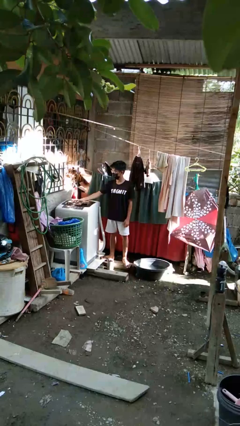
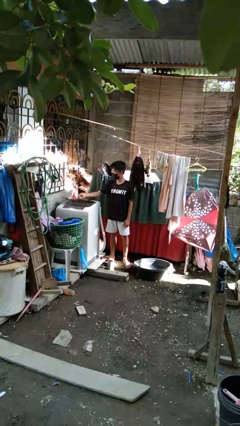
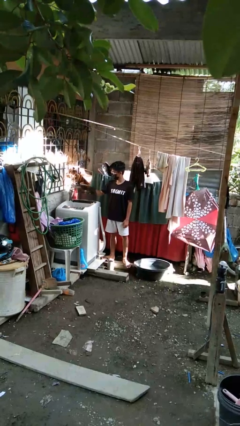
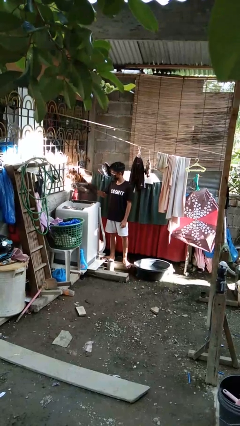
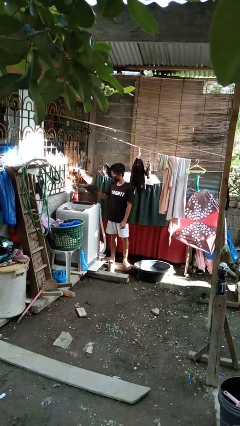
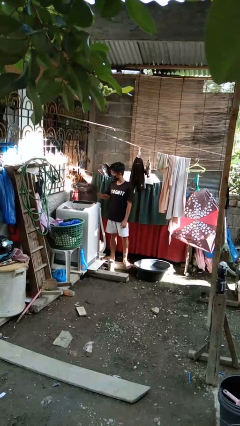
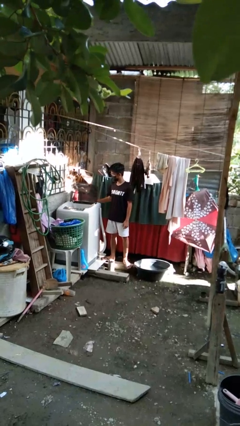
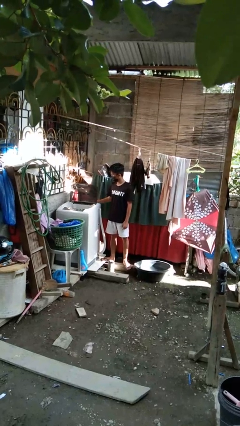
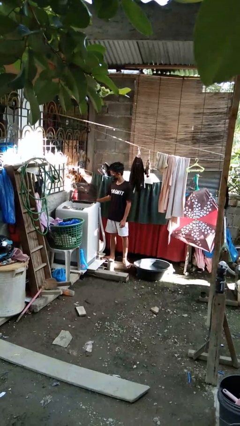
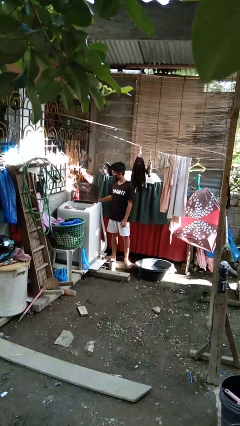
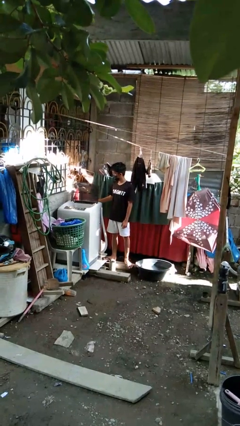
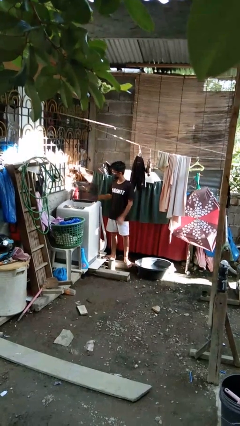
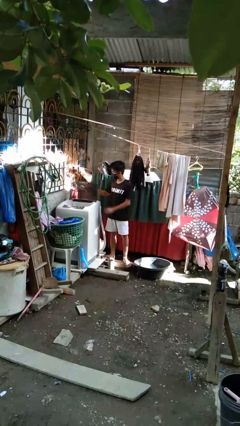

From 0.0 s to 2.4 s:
person opens clothes washer

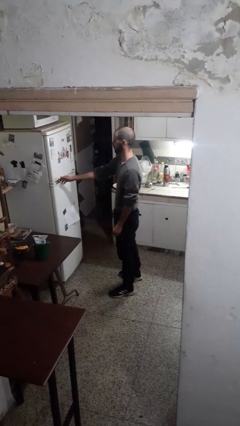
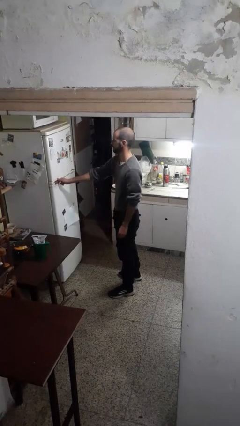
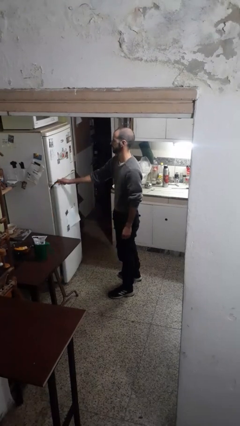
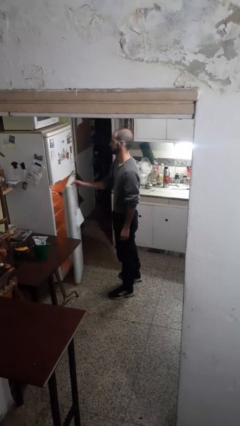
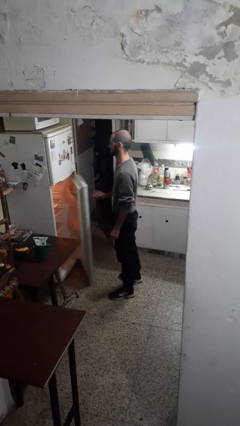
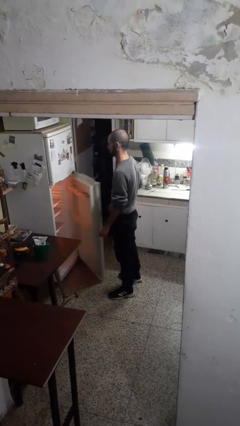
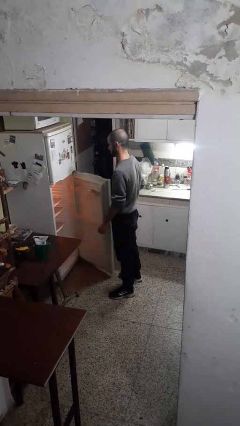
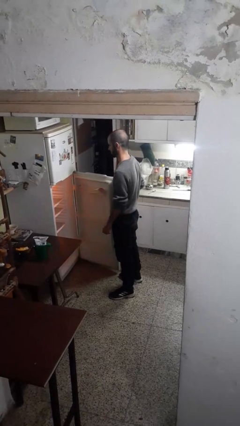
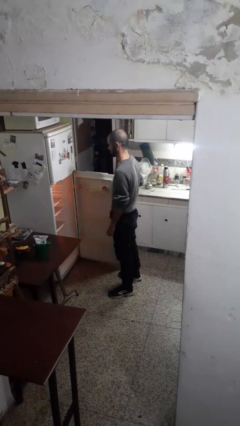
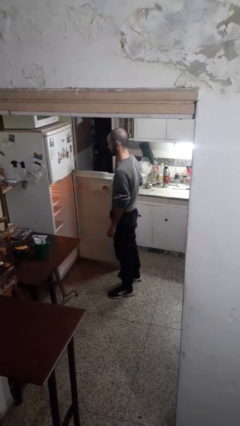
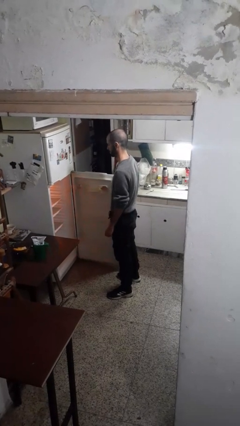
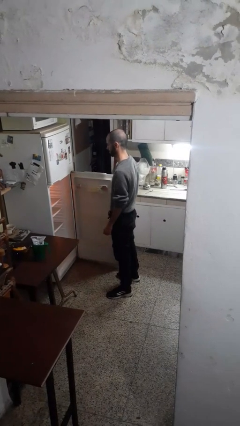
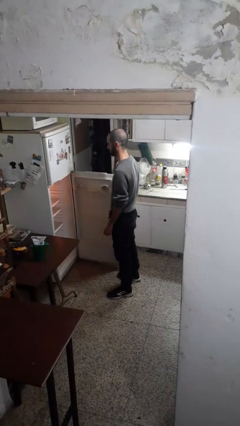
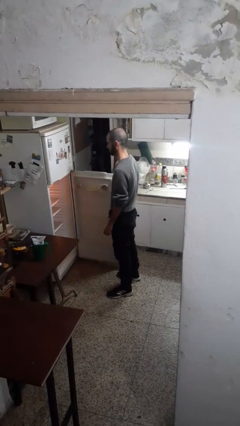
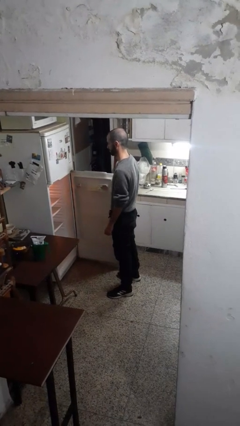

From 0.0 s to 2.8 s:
person opens refrigerator

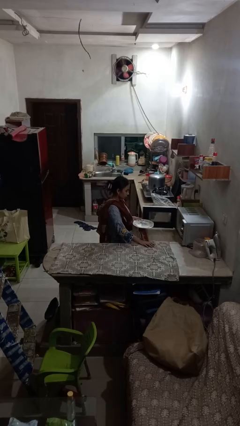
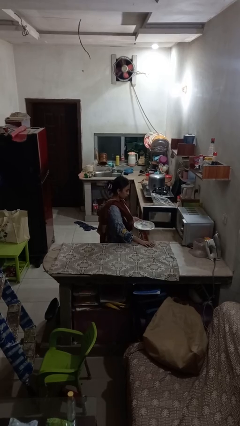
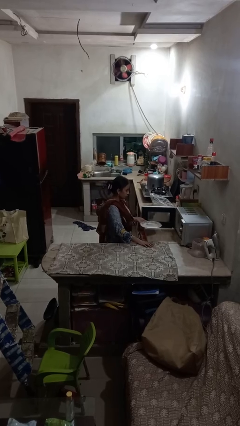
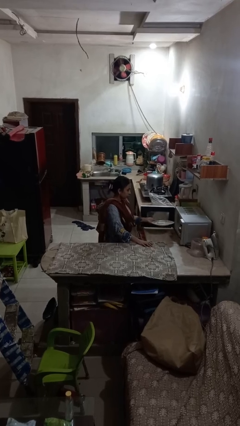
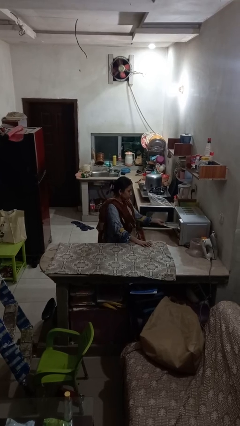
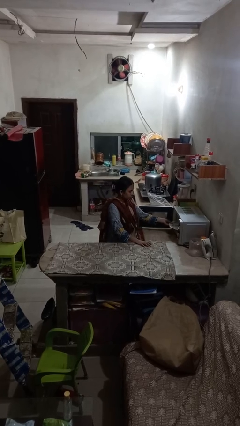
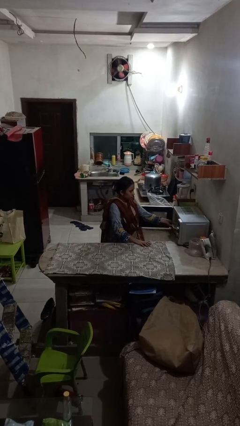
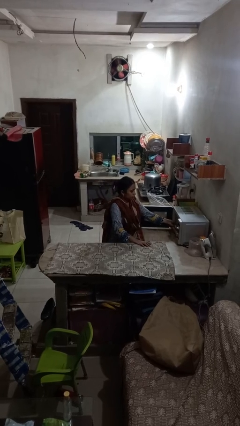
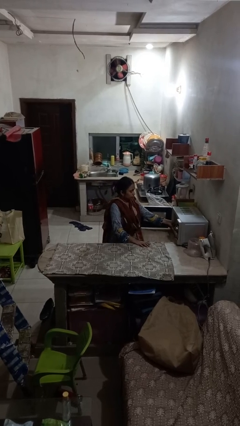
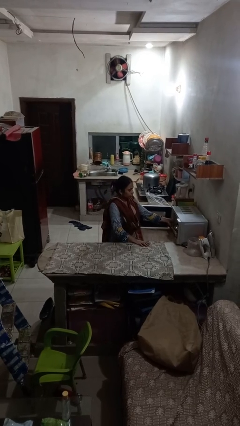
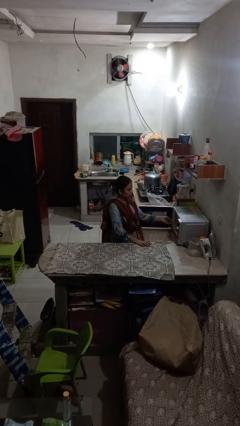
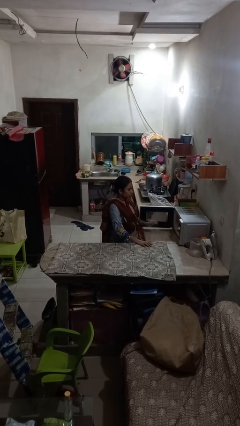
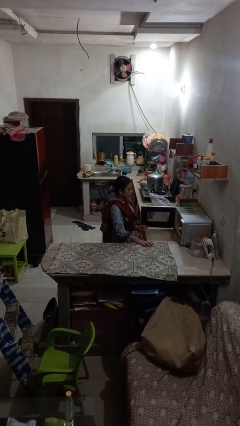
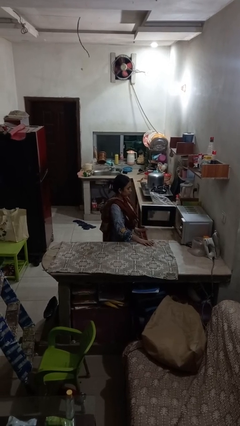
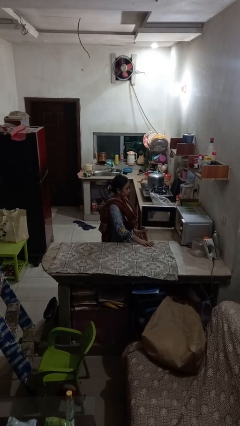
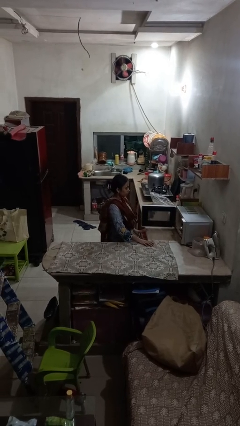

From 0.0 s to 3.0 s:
person puts object into microwave

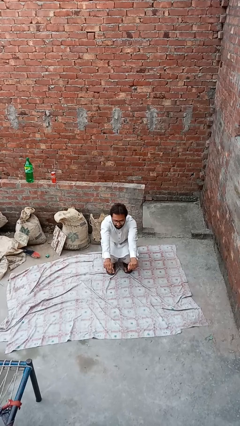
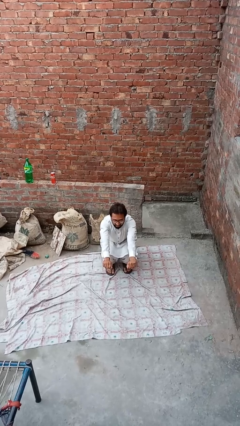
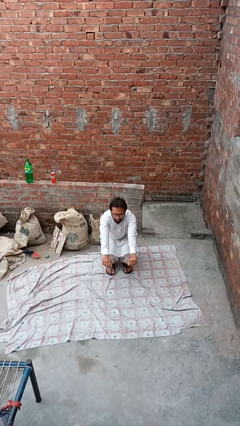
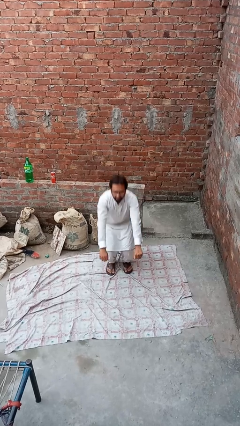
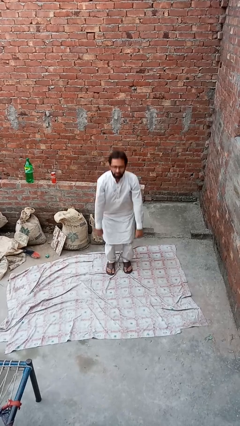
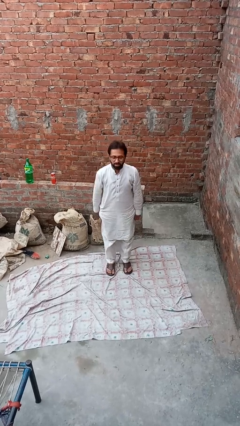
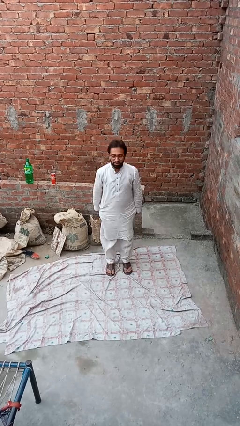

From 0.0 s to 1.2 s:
person stands up

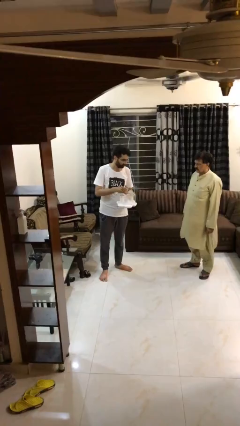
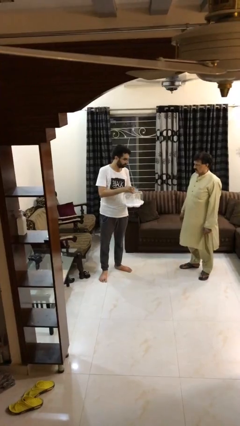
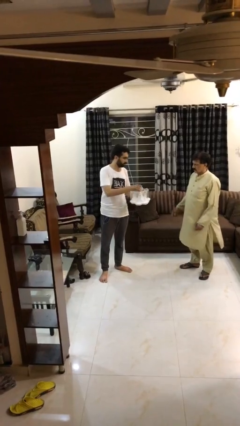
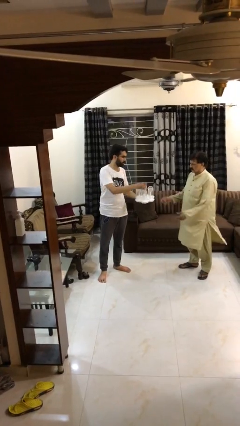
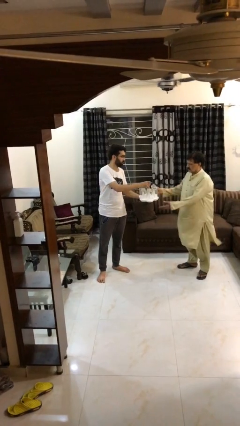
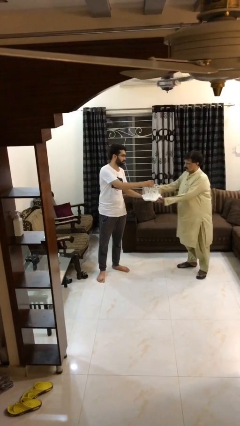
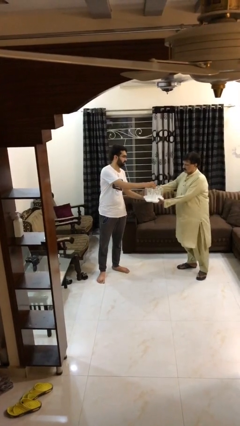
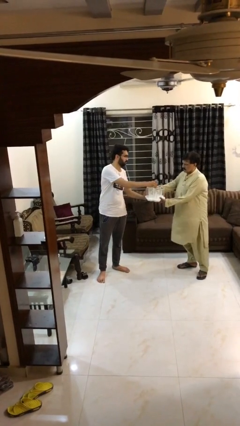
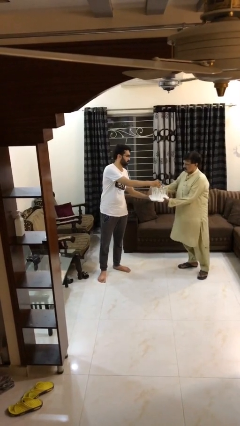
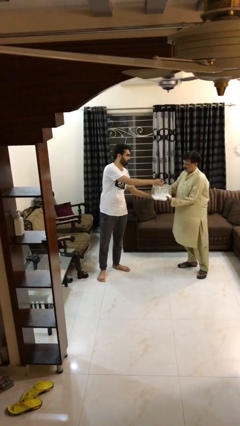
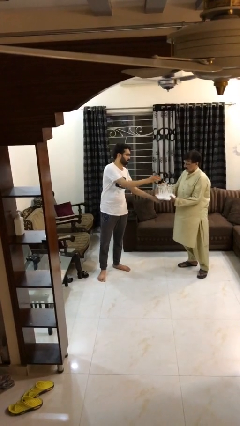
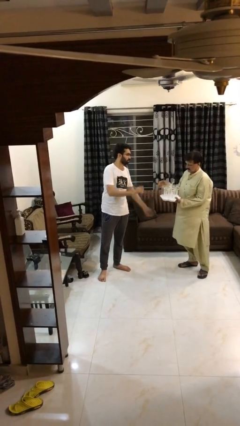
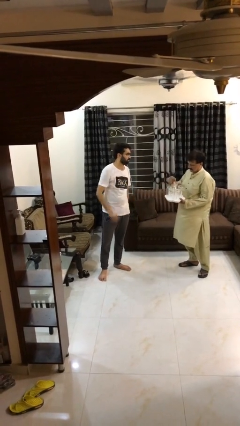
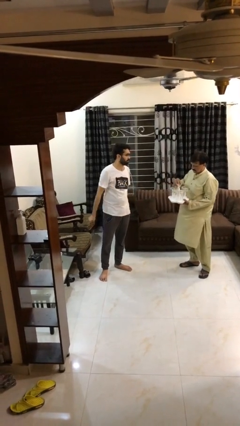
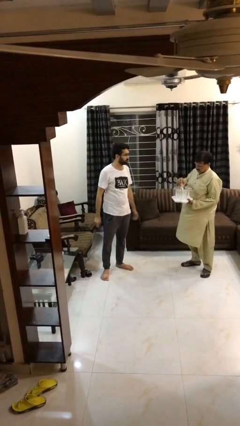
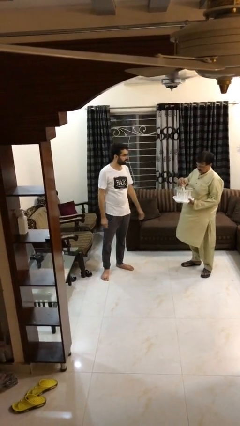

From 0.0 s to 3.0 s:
person transfers object to person

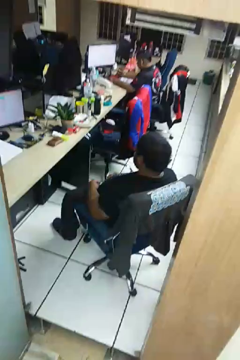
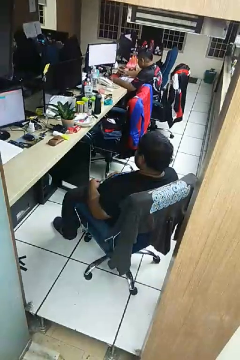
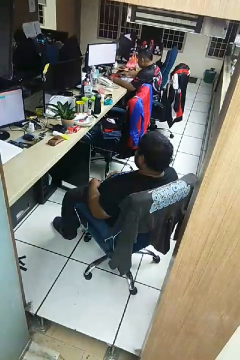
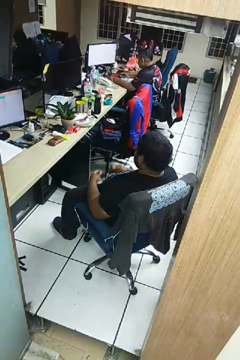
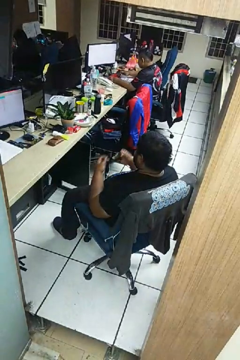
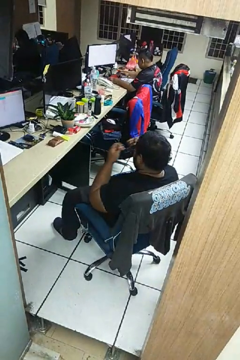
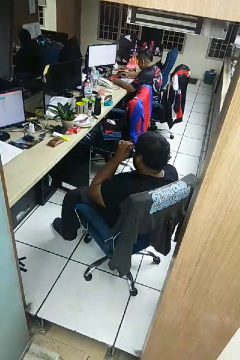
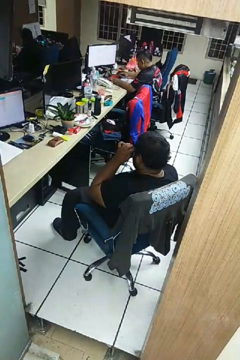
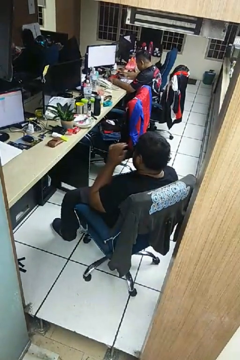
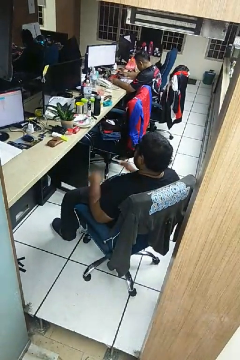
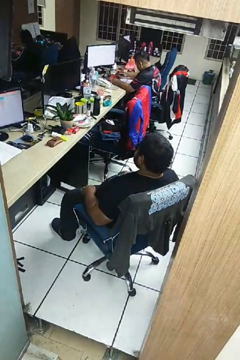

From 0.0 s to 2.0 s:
person puts on sunglasses

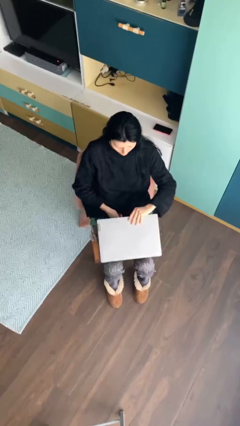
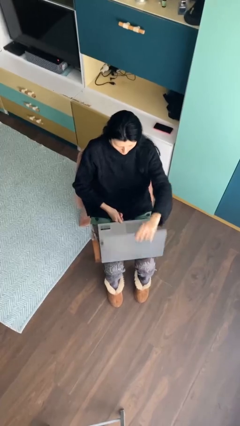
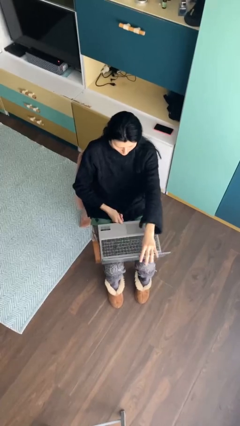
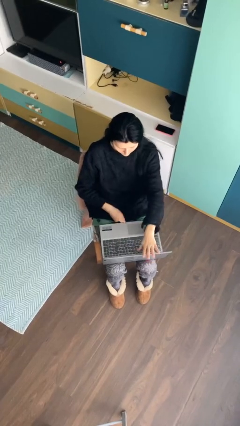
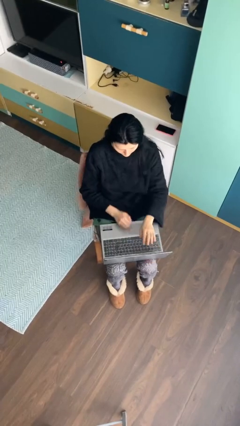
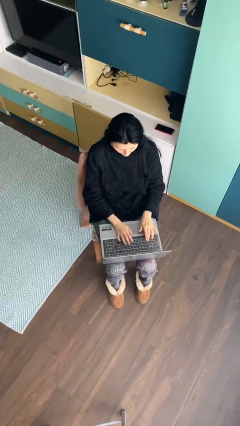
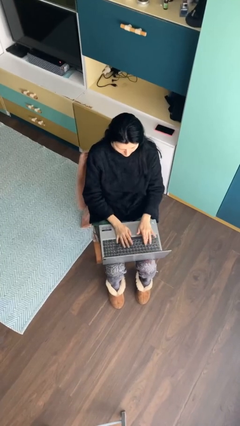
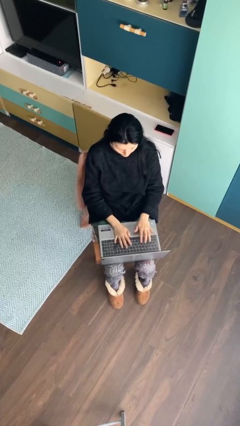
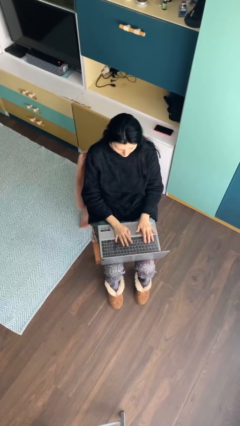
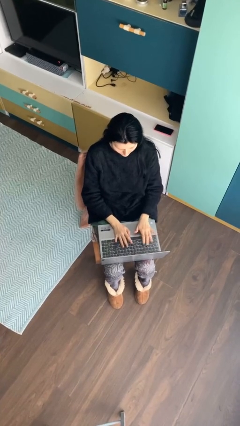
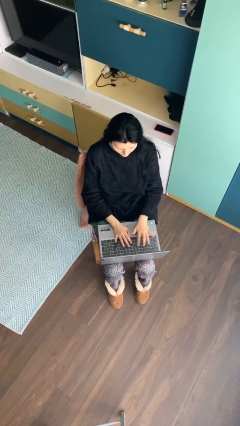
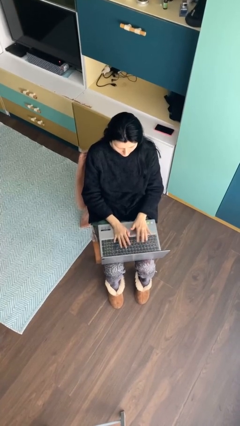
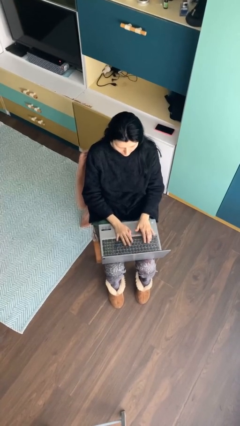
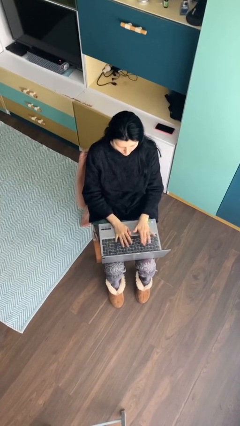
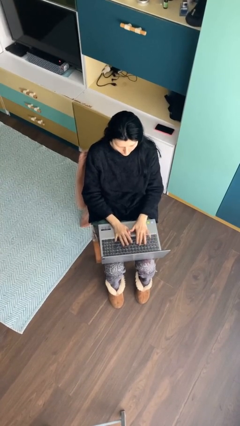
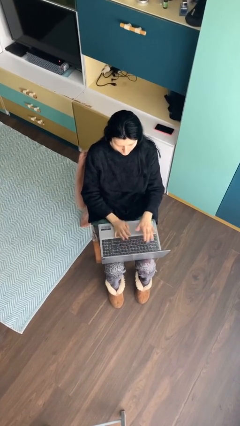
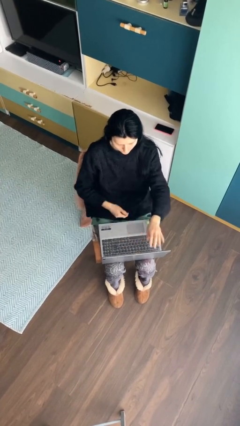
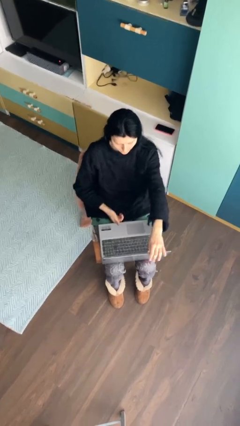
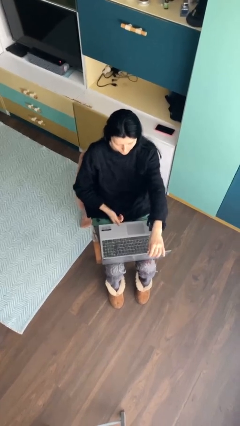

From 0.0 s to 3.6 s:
person interacts with laptop
